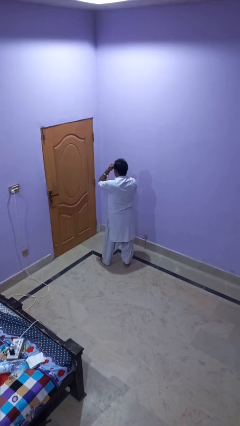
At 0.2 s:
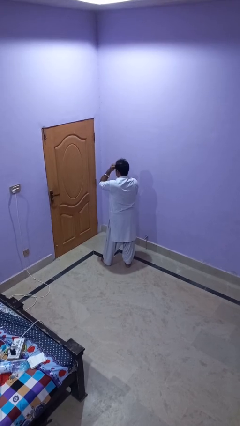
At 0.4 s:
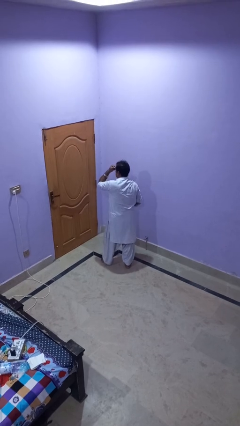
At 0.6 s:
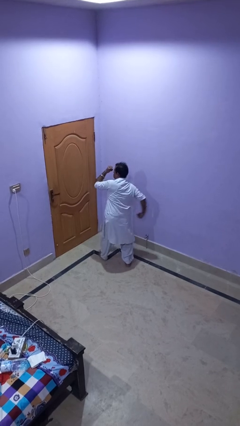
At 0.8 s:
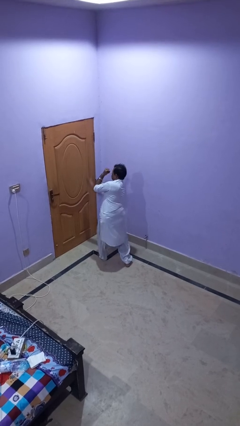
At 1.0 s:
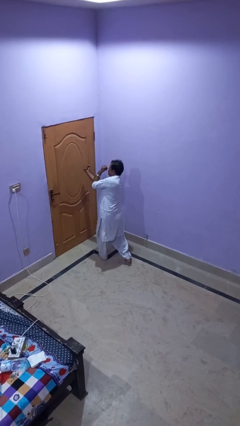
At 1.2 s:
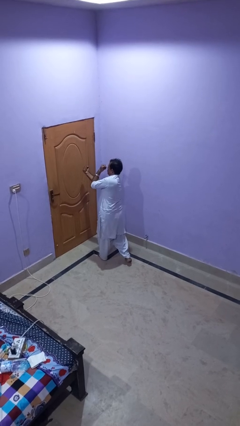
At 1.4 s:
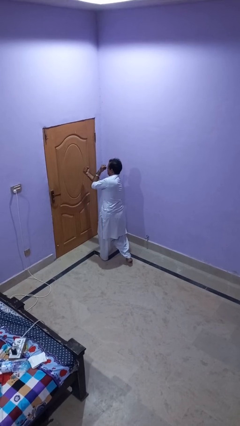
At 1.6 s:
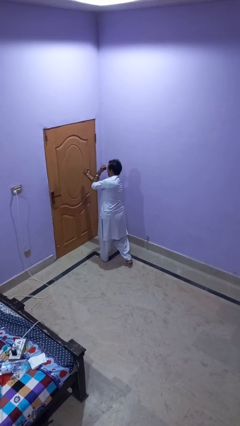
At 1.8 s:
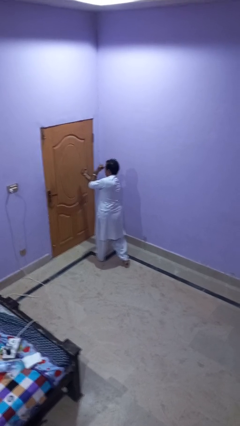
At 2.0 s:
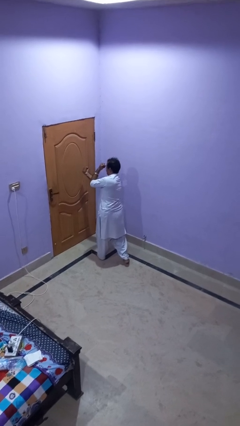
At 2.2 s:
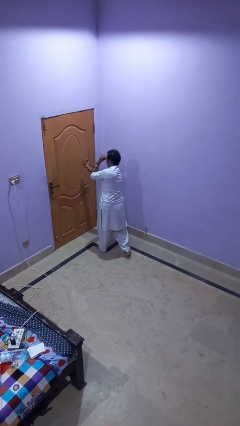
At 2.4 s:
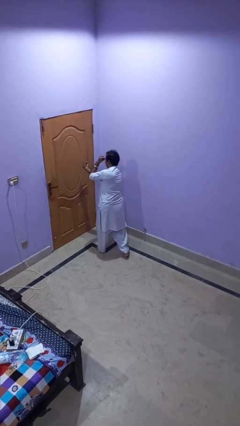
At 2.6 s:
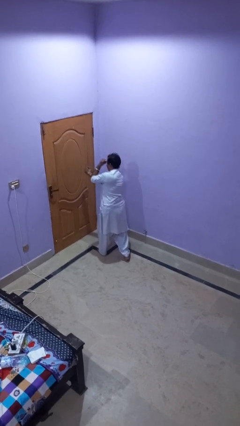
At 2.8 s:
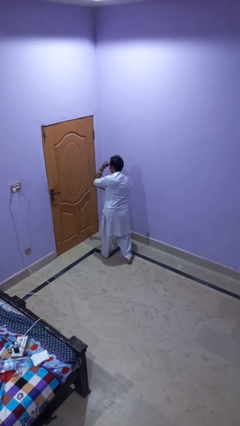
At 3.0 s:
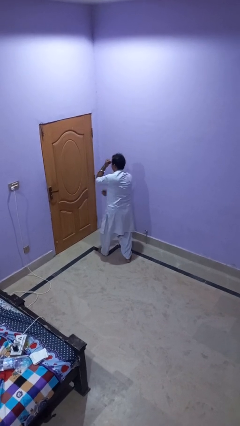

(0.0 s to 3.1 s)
person punches

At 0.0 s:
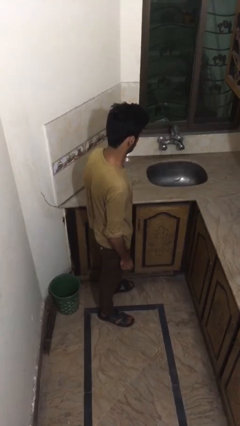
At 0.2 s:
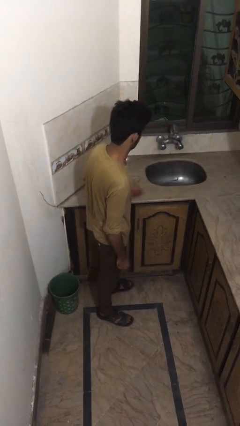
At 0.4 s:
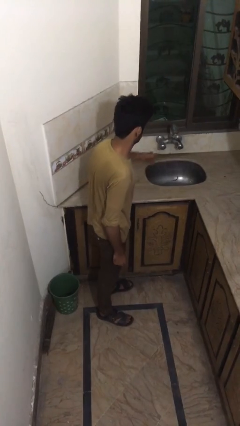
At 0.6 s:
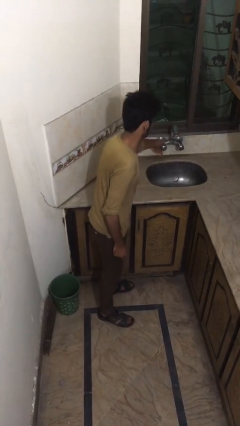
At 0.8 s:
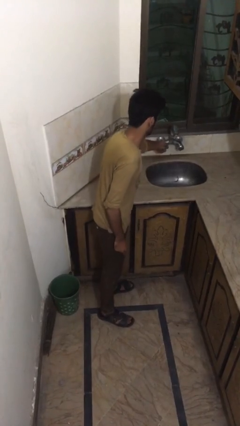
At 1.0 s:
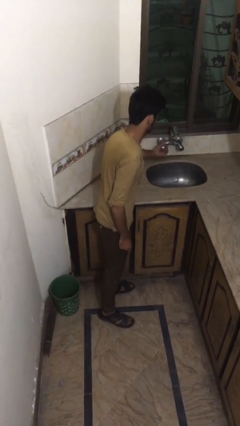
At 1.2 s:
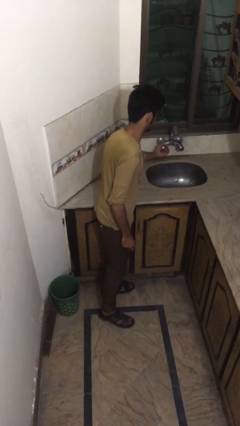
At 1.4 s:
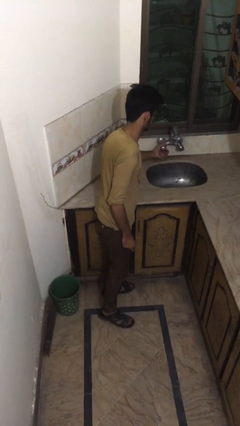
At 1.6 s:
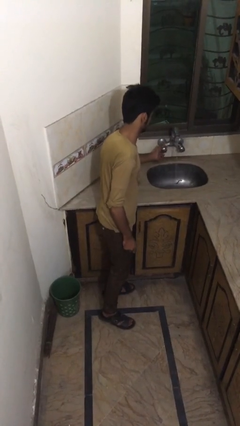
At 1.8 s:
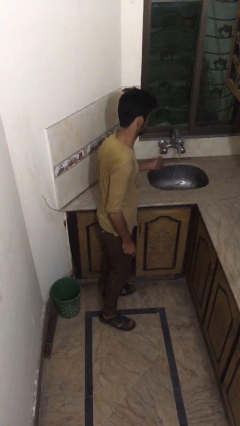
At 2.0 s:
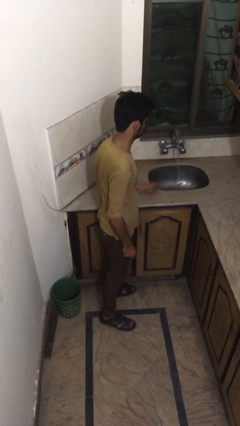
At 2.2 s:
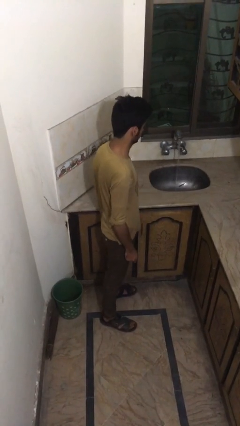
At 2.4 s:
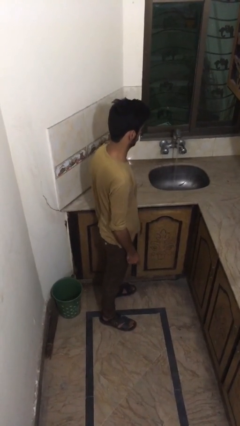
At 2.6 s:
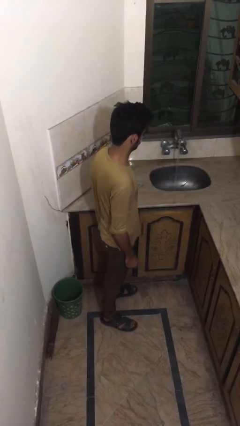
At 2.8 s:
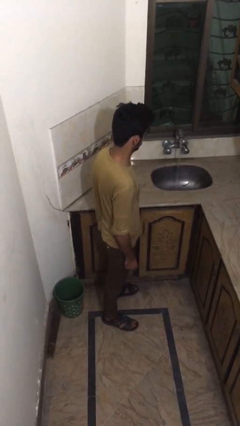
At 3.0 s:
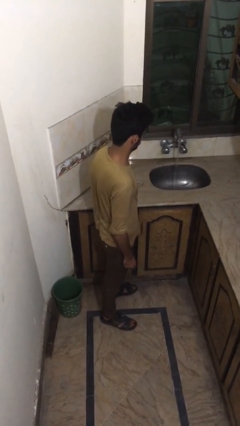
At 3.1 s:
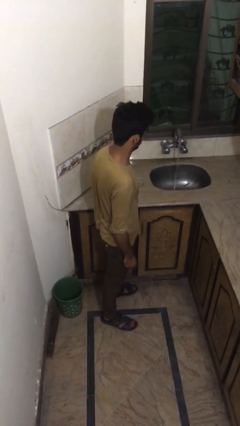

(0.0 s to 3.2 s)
person turns on faucet

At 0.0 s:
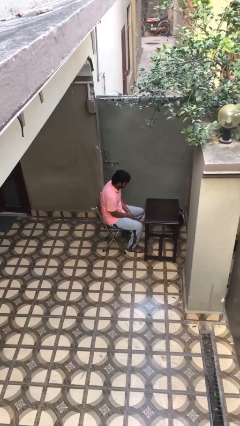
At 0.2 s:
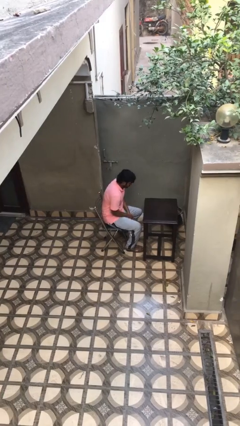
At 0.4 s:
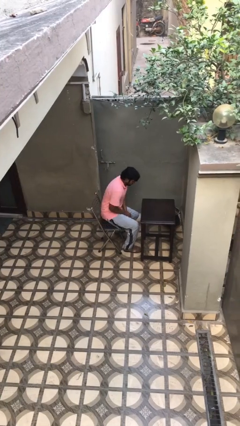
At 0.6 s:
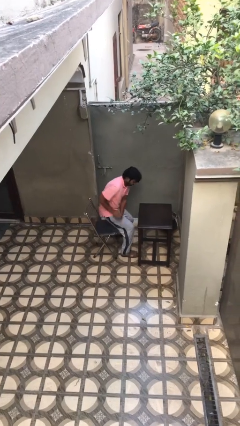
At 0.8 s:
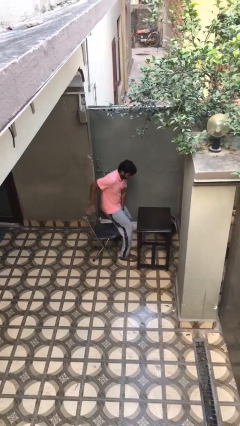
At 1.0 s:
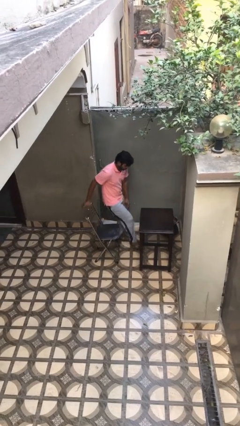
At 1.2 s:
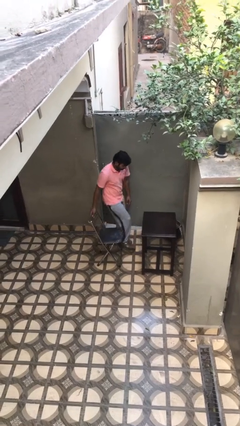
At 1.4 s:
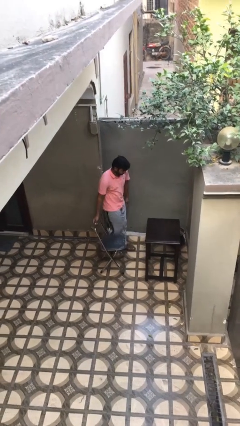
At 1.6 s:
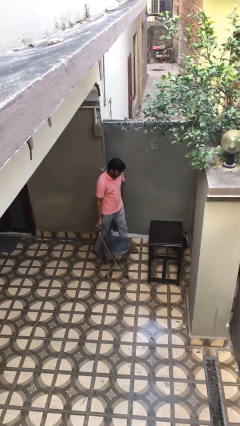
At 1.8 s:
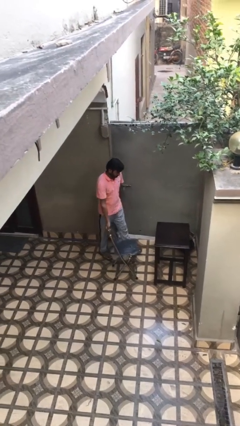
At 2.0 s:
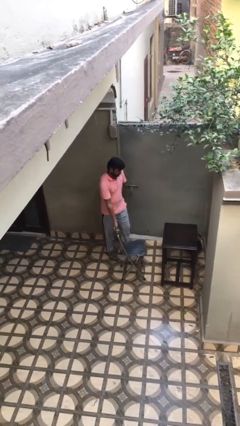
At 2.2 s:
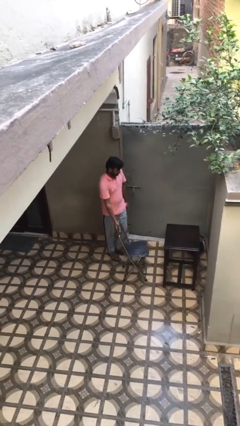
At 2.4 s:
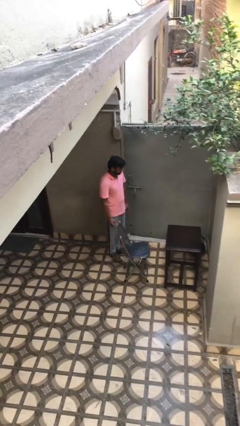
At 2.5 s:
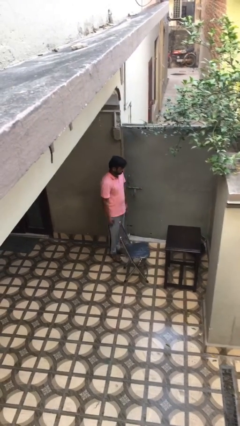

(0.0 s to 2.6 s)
person stands up

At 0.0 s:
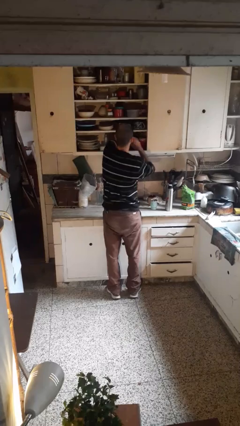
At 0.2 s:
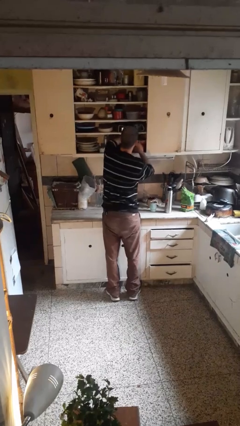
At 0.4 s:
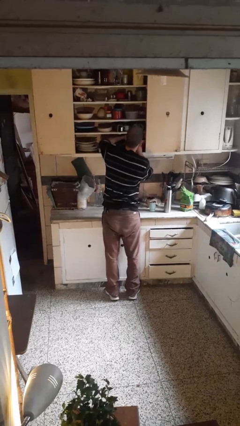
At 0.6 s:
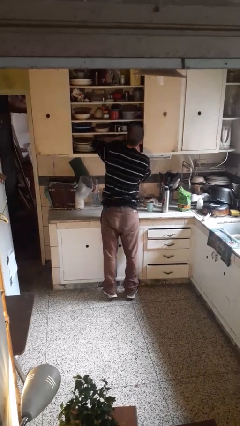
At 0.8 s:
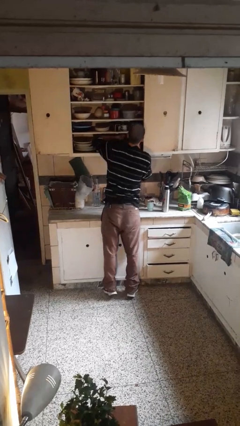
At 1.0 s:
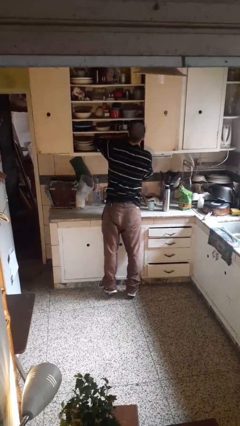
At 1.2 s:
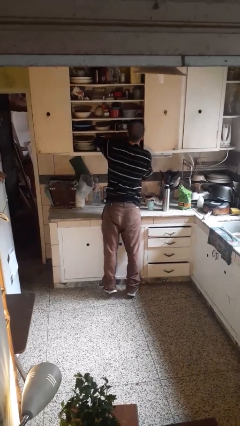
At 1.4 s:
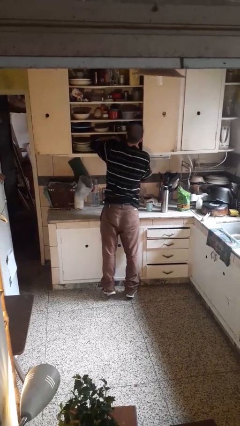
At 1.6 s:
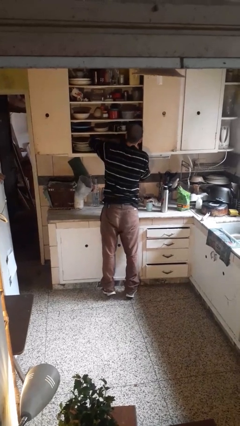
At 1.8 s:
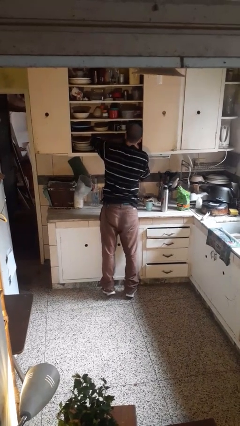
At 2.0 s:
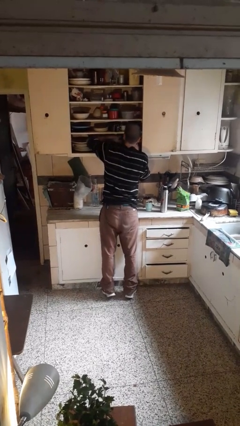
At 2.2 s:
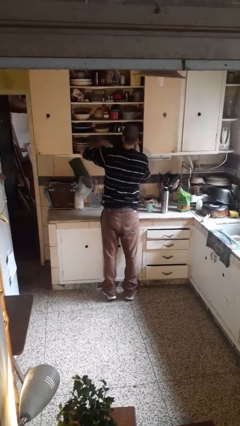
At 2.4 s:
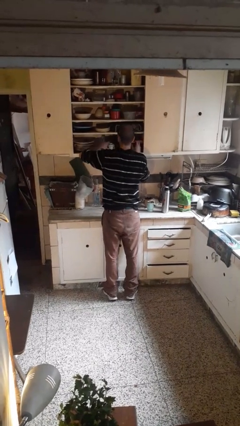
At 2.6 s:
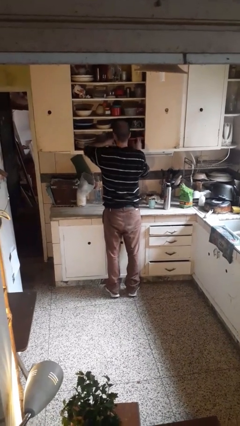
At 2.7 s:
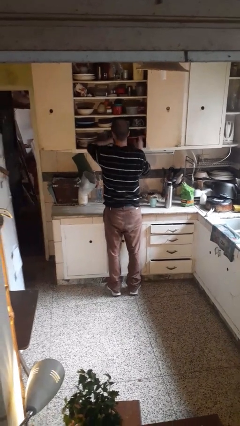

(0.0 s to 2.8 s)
person searches in cabinet

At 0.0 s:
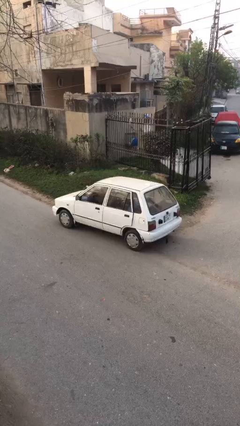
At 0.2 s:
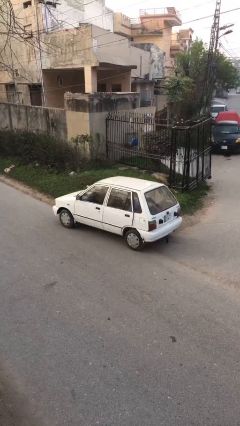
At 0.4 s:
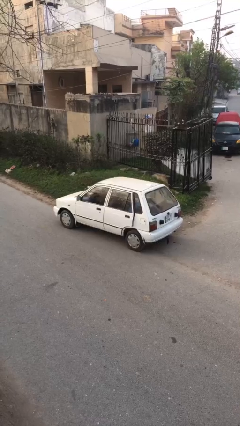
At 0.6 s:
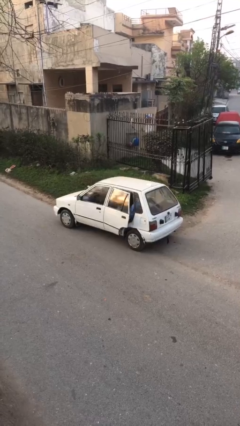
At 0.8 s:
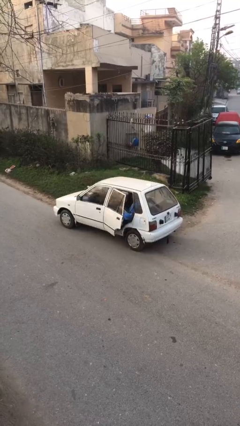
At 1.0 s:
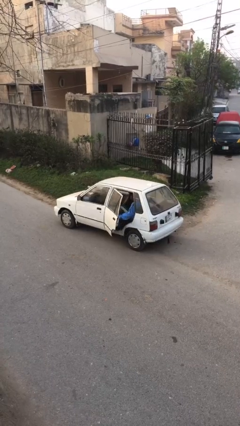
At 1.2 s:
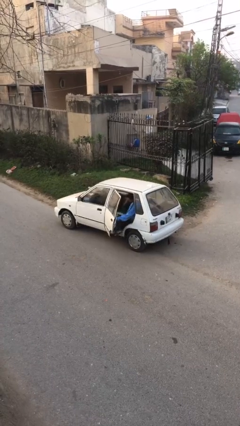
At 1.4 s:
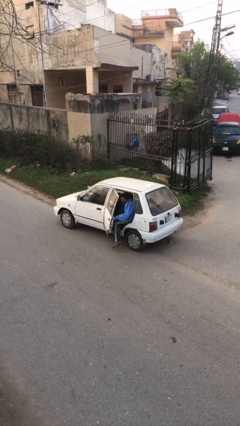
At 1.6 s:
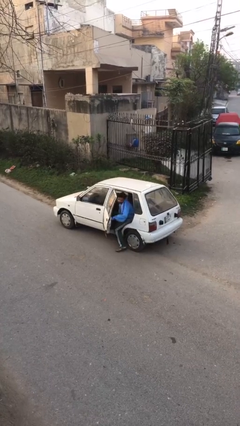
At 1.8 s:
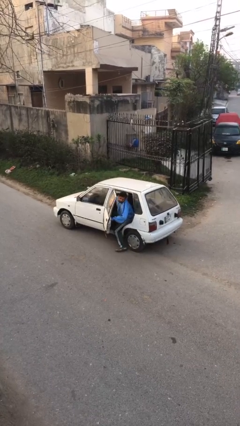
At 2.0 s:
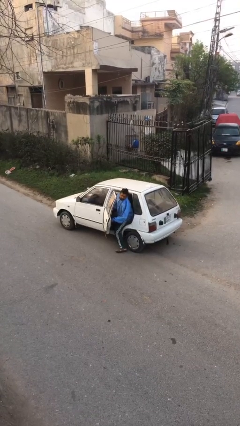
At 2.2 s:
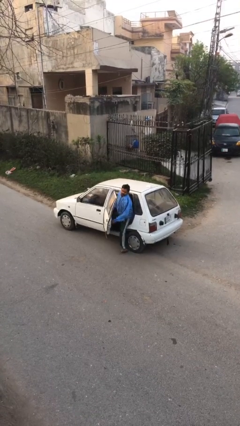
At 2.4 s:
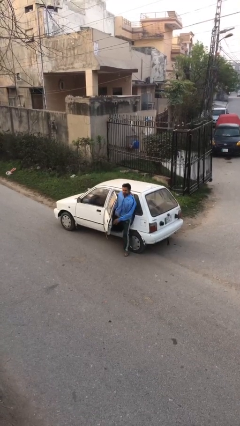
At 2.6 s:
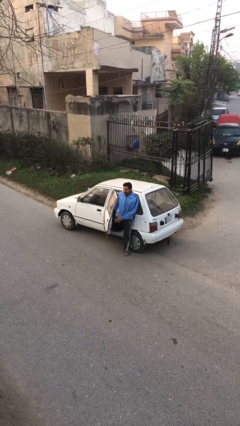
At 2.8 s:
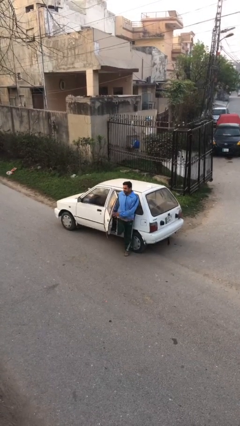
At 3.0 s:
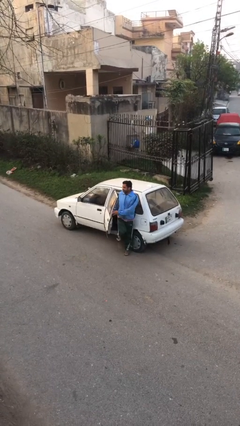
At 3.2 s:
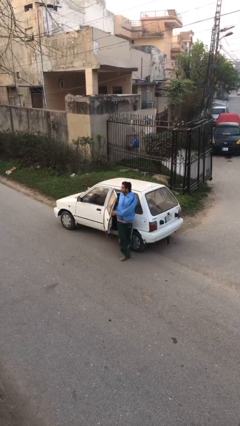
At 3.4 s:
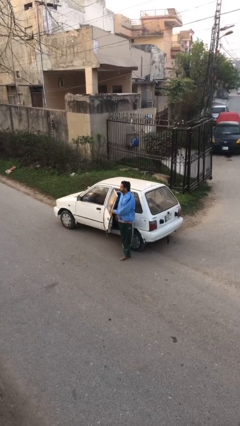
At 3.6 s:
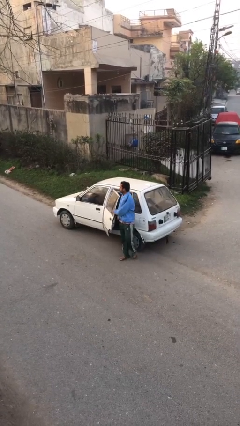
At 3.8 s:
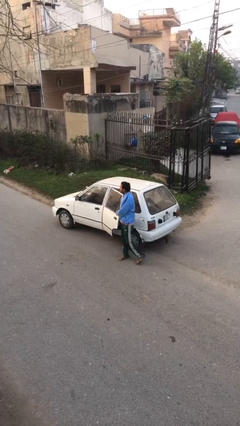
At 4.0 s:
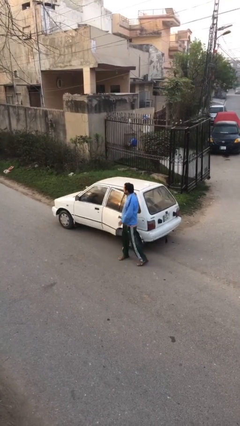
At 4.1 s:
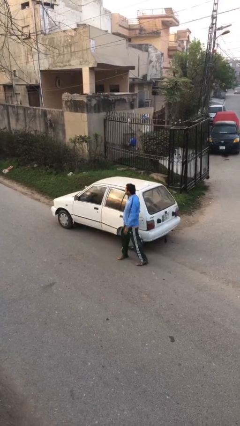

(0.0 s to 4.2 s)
car drops off person

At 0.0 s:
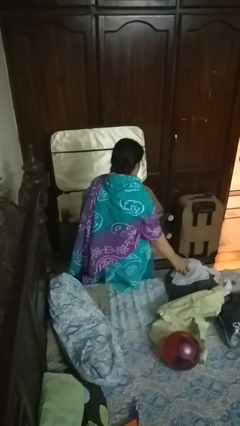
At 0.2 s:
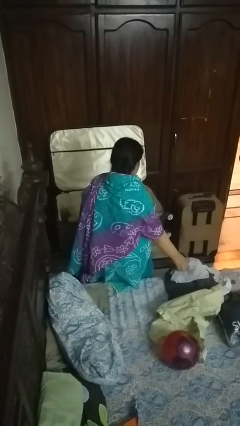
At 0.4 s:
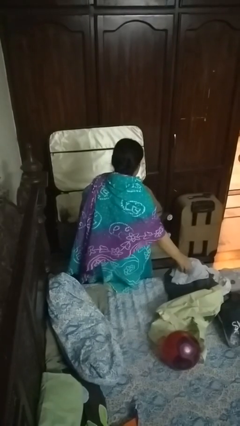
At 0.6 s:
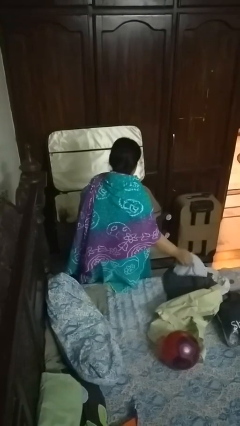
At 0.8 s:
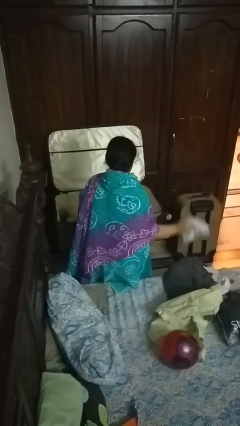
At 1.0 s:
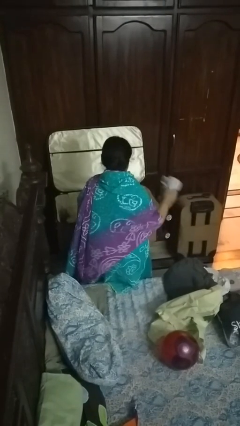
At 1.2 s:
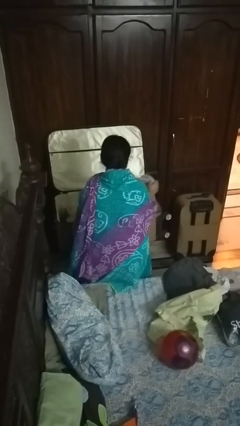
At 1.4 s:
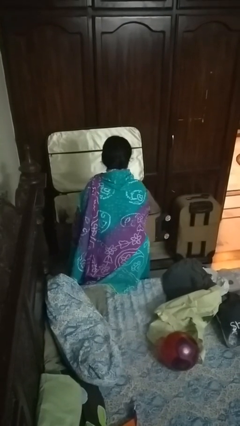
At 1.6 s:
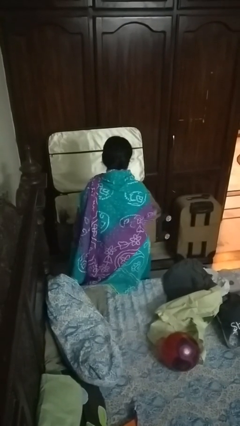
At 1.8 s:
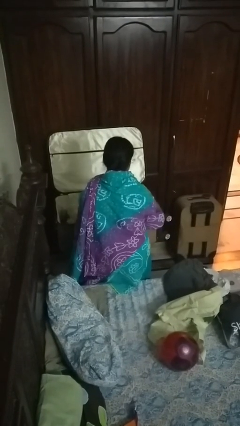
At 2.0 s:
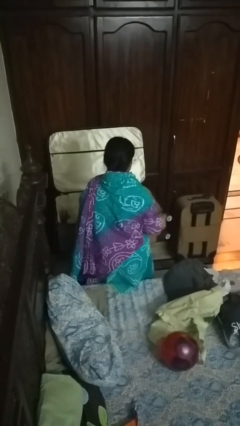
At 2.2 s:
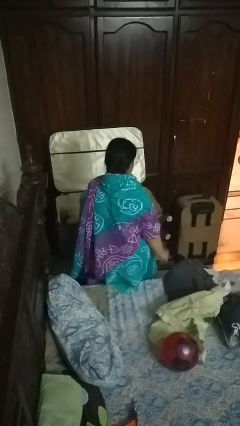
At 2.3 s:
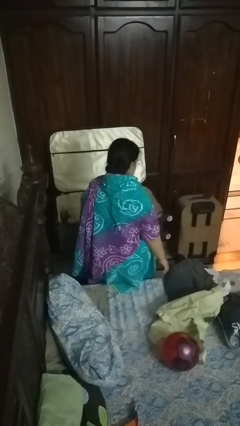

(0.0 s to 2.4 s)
person loads clothes into suitcase
